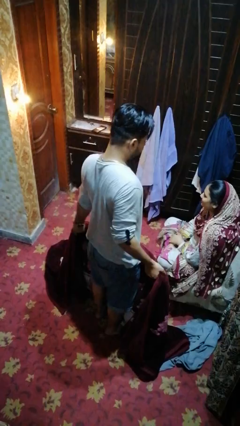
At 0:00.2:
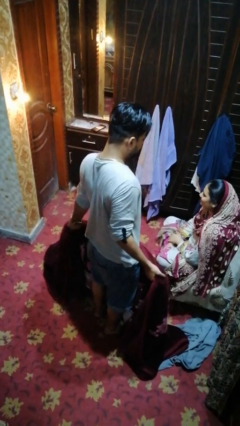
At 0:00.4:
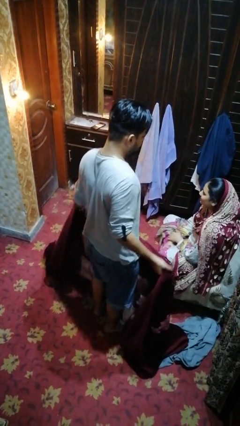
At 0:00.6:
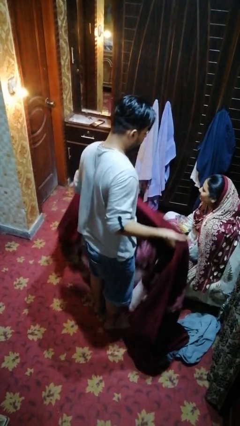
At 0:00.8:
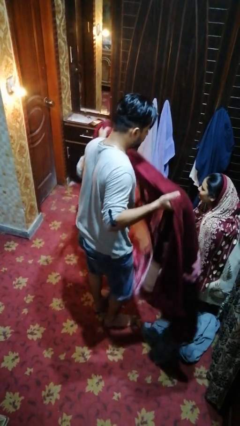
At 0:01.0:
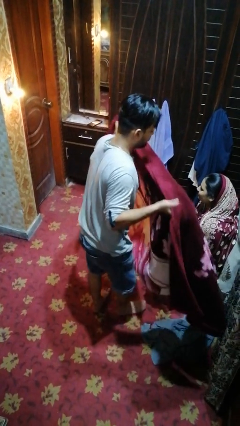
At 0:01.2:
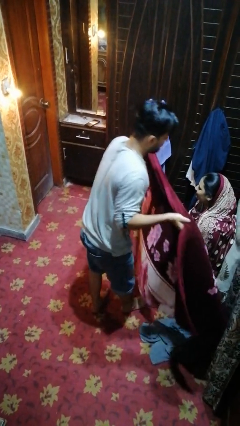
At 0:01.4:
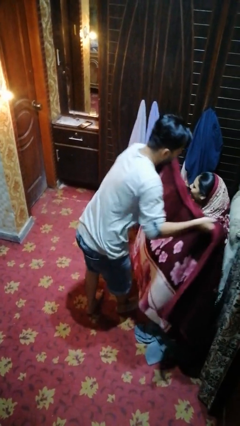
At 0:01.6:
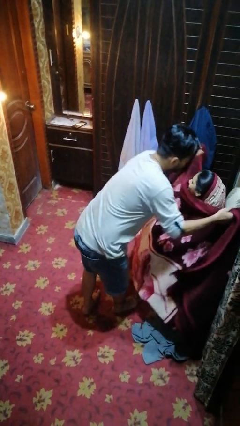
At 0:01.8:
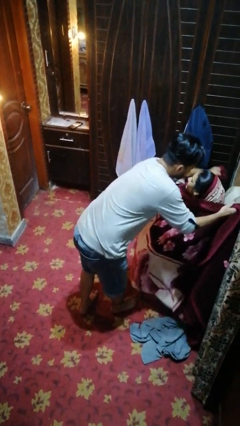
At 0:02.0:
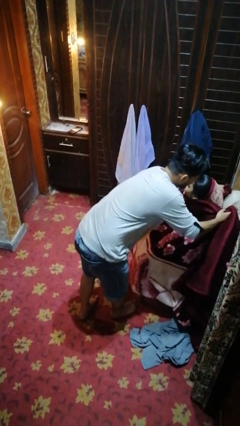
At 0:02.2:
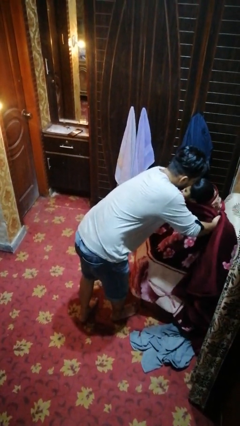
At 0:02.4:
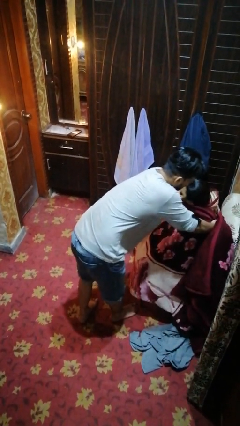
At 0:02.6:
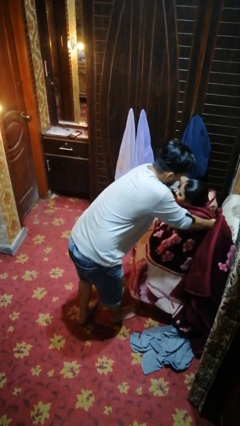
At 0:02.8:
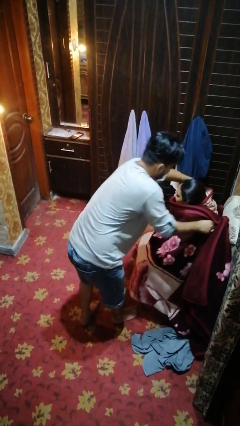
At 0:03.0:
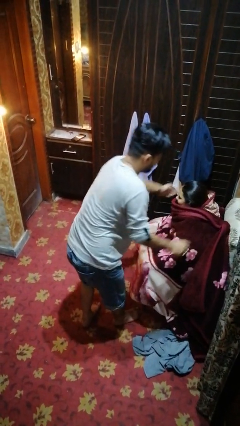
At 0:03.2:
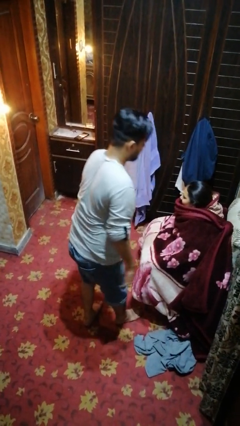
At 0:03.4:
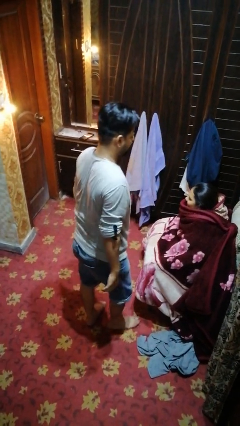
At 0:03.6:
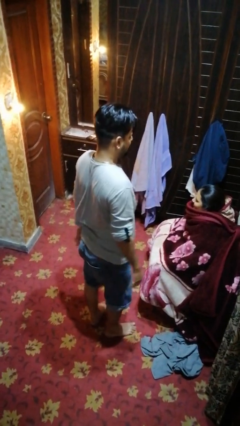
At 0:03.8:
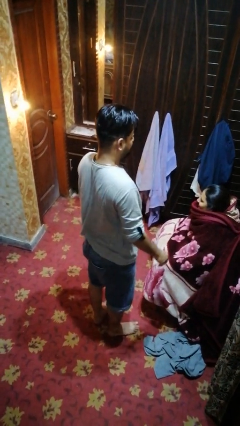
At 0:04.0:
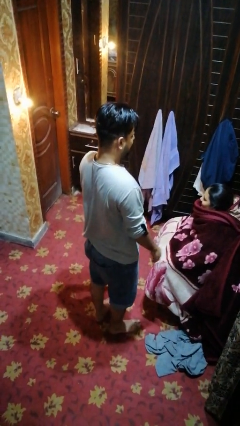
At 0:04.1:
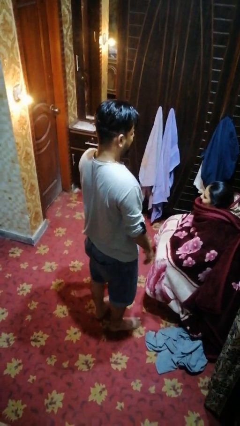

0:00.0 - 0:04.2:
person covers friend with blanket

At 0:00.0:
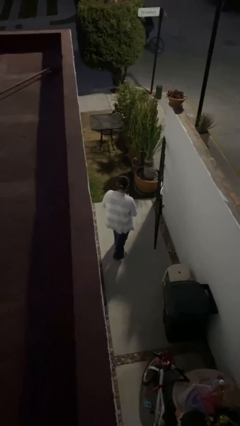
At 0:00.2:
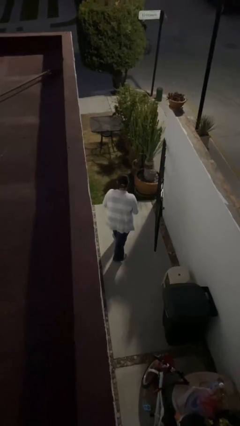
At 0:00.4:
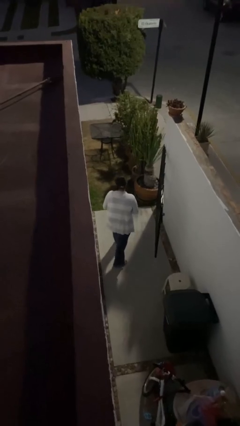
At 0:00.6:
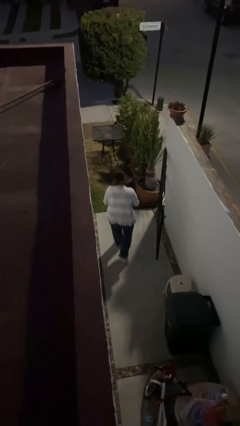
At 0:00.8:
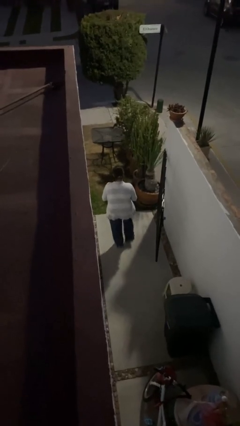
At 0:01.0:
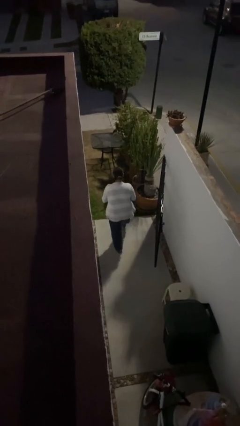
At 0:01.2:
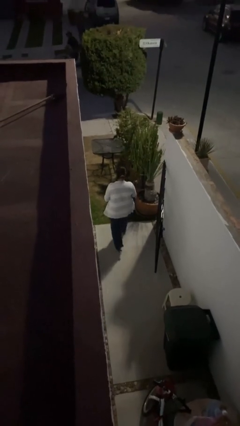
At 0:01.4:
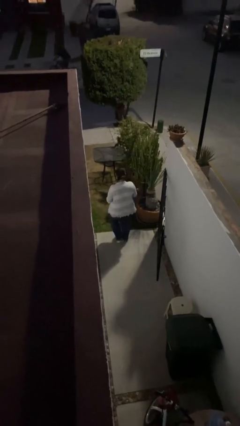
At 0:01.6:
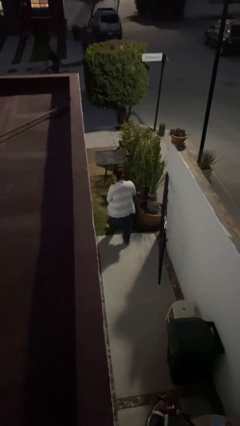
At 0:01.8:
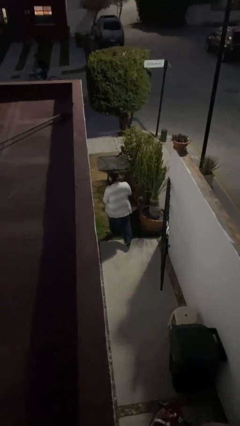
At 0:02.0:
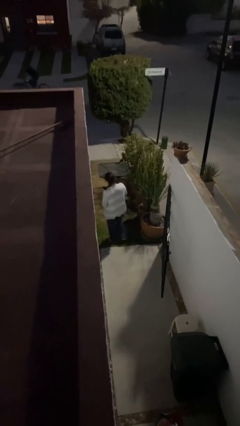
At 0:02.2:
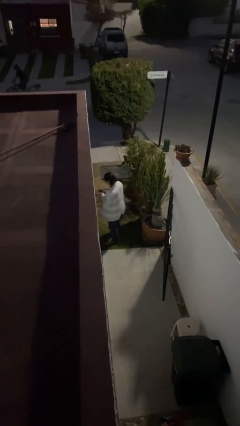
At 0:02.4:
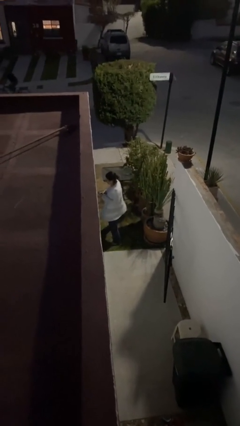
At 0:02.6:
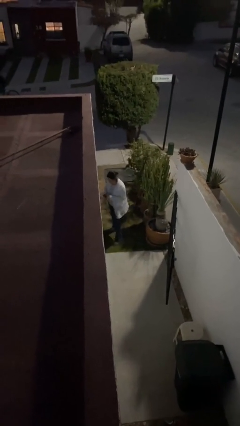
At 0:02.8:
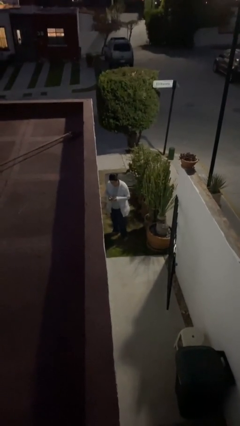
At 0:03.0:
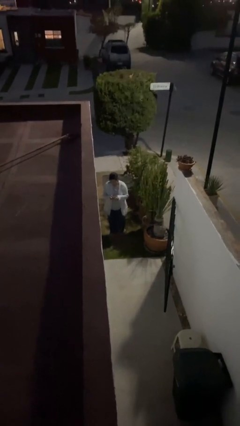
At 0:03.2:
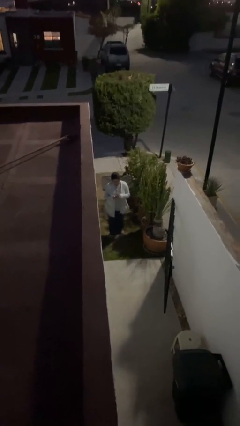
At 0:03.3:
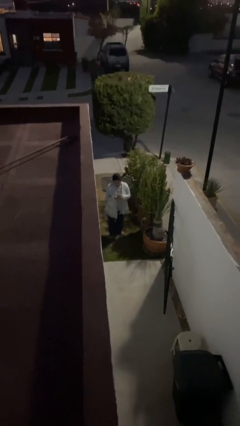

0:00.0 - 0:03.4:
person exits scene through structure

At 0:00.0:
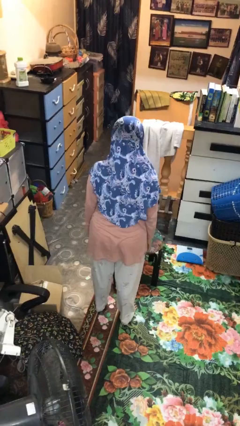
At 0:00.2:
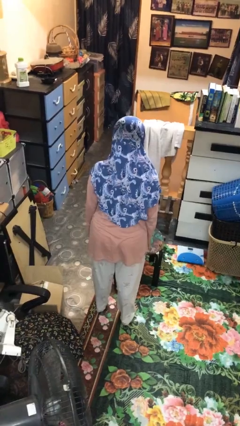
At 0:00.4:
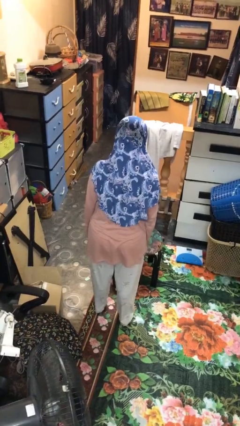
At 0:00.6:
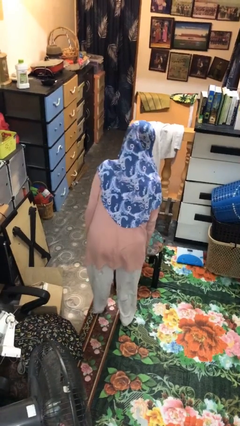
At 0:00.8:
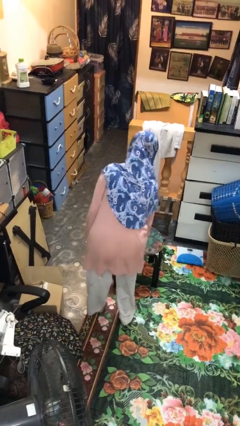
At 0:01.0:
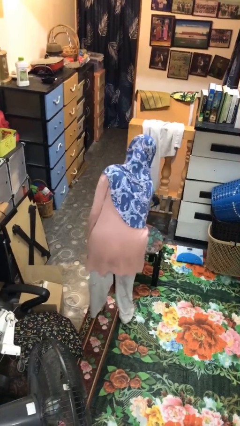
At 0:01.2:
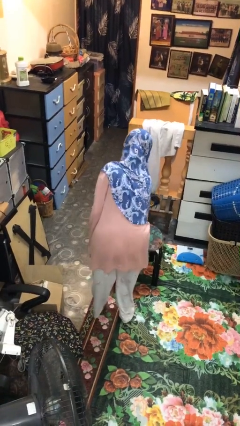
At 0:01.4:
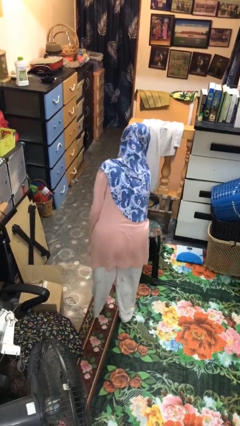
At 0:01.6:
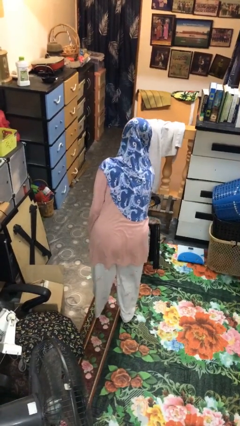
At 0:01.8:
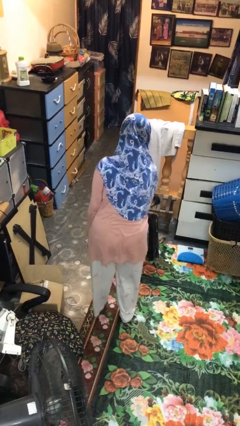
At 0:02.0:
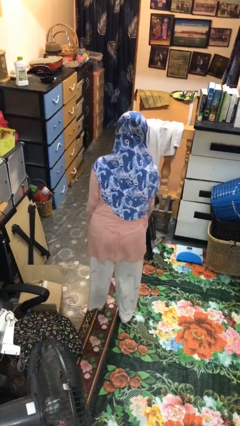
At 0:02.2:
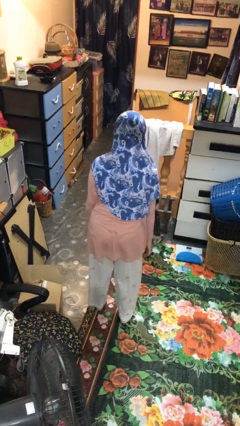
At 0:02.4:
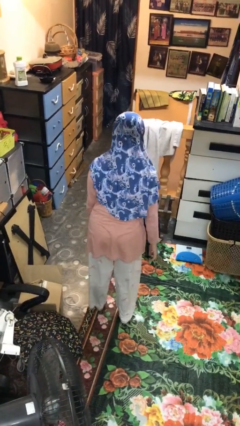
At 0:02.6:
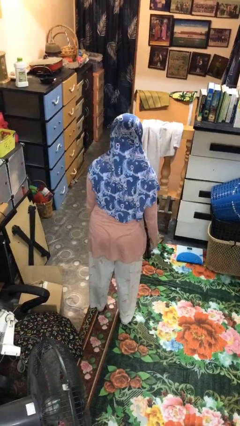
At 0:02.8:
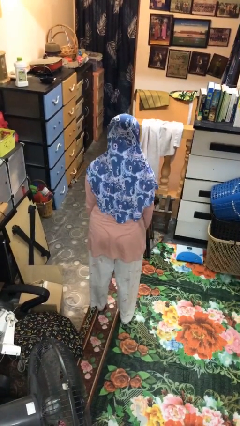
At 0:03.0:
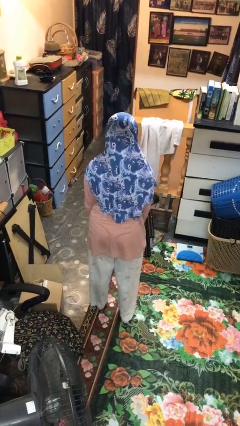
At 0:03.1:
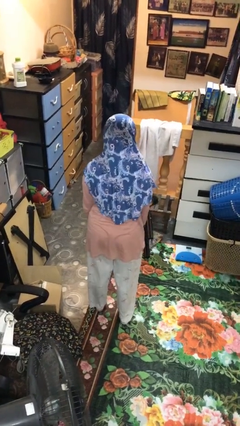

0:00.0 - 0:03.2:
person knocks over furniture

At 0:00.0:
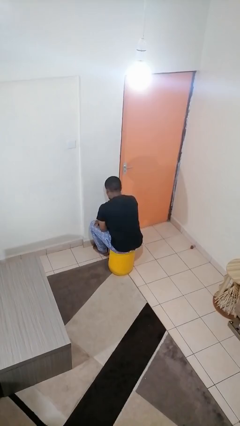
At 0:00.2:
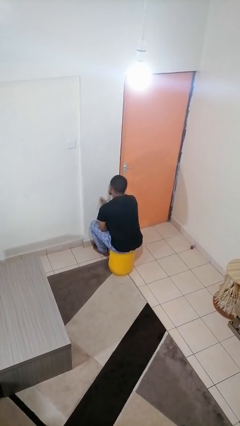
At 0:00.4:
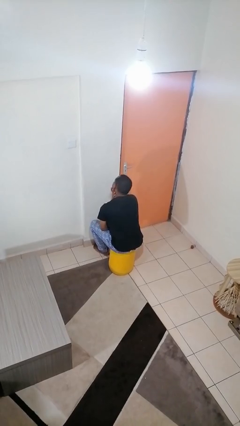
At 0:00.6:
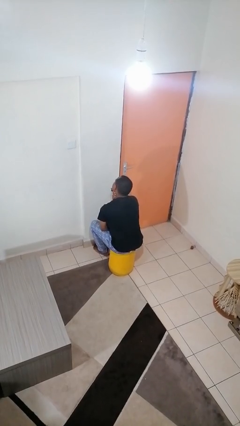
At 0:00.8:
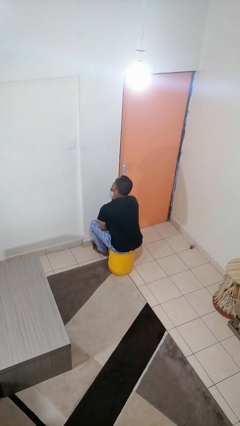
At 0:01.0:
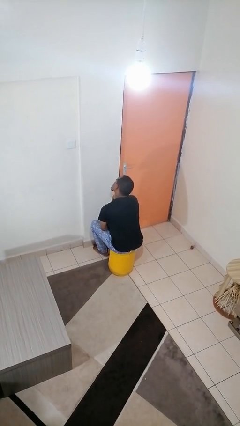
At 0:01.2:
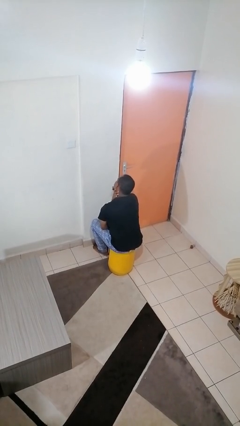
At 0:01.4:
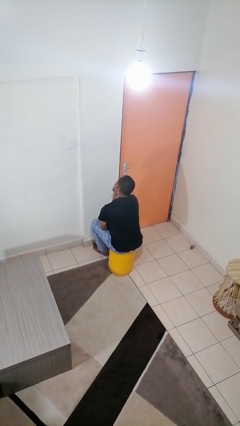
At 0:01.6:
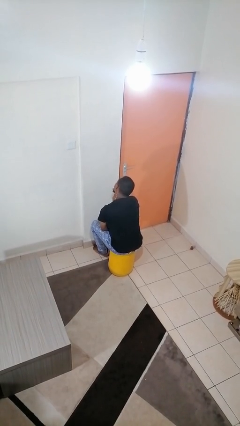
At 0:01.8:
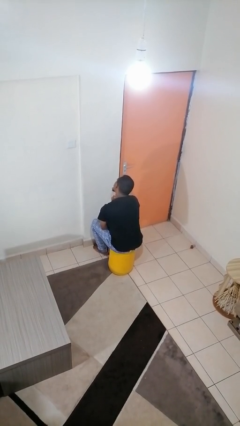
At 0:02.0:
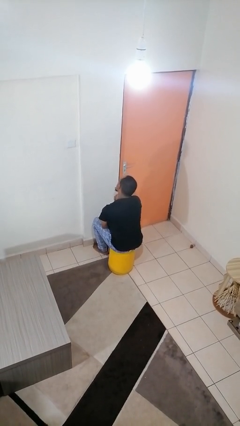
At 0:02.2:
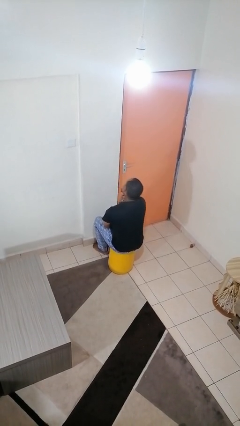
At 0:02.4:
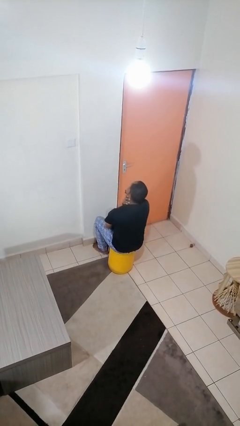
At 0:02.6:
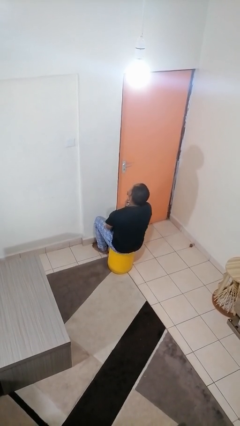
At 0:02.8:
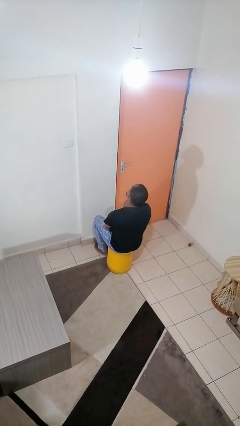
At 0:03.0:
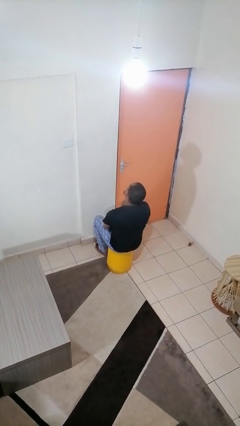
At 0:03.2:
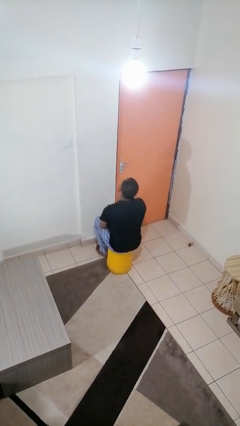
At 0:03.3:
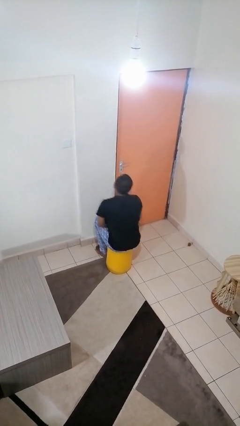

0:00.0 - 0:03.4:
person rubs neck

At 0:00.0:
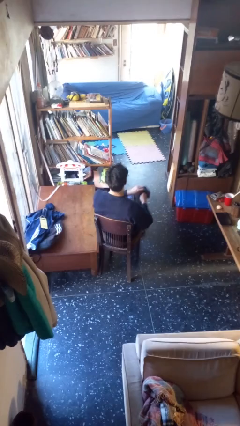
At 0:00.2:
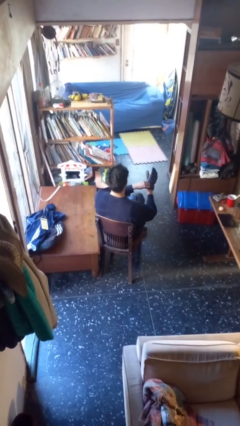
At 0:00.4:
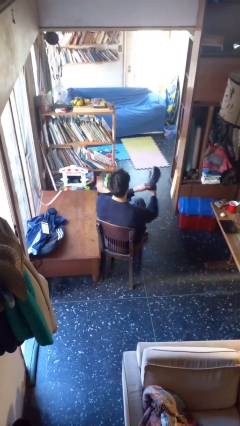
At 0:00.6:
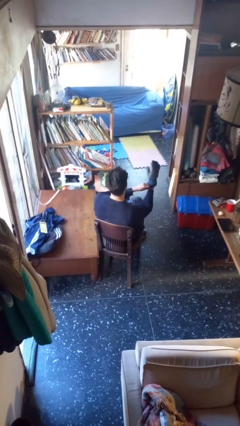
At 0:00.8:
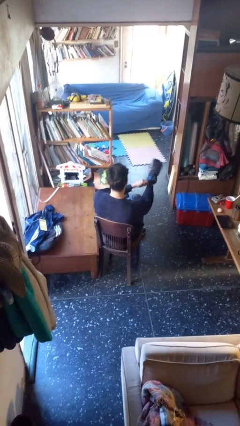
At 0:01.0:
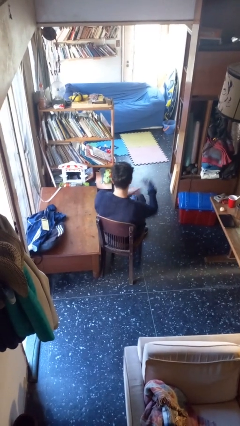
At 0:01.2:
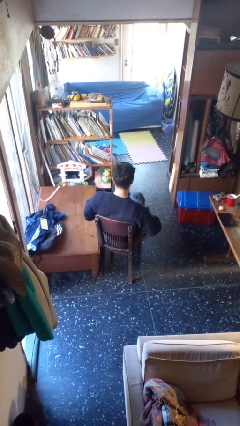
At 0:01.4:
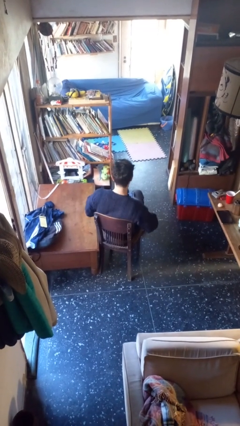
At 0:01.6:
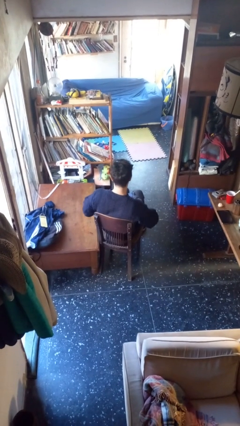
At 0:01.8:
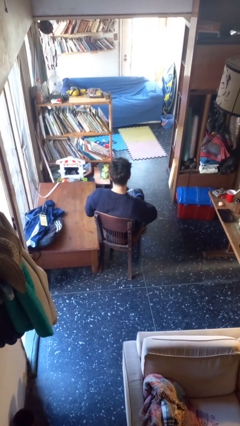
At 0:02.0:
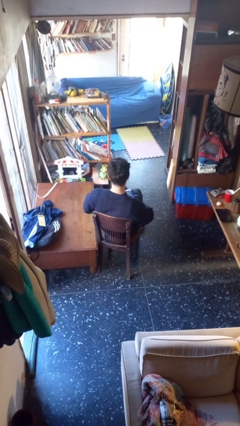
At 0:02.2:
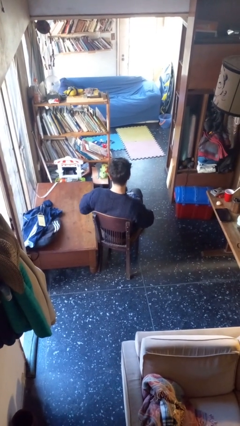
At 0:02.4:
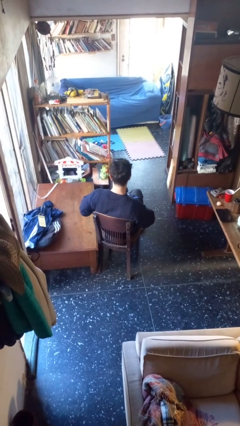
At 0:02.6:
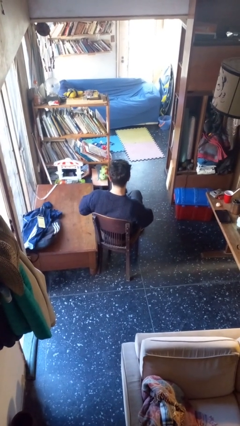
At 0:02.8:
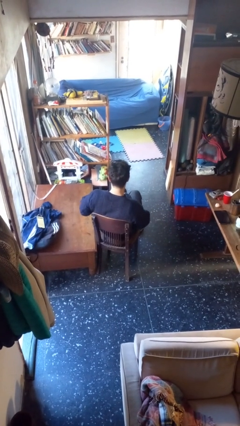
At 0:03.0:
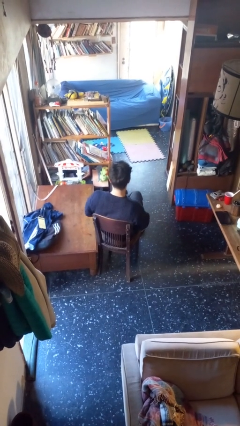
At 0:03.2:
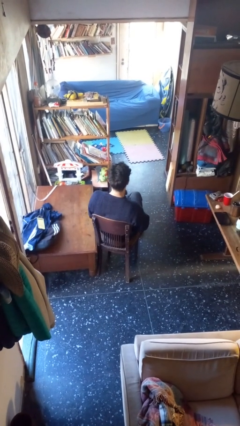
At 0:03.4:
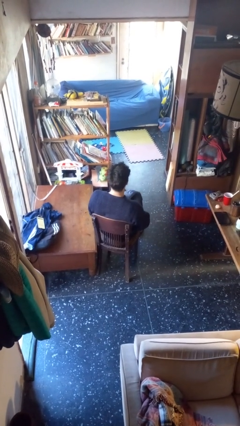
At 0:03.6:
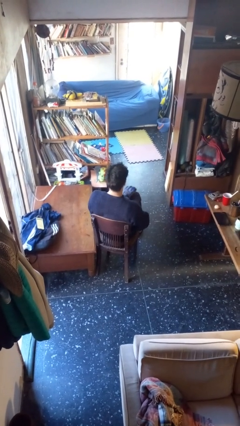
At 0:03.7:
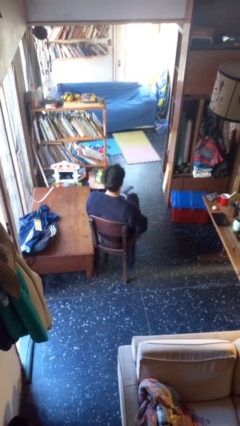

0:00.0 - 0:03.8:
person puts on gloves
